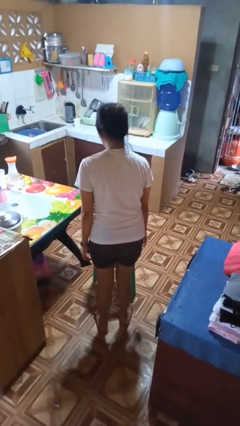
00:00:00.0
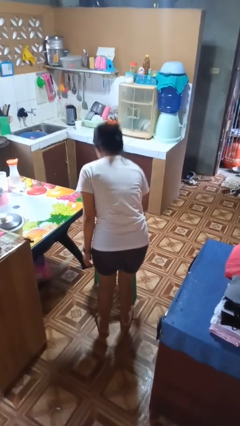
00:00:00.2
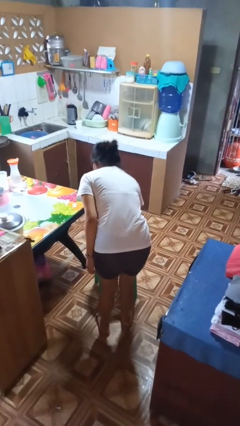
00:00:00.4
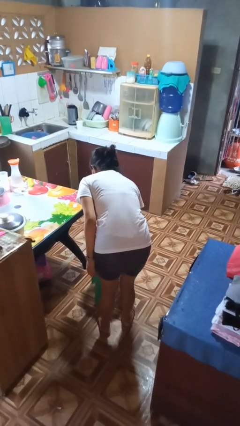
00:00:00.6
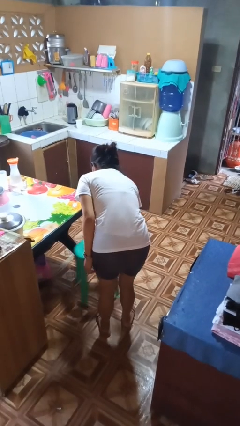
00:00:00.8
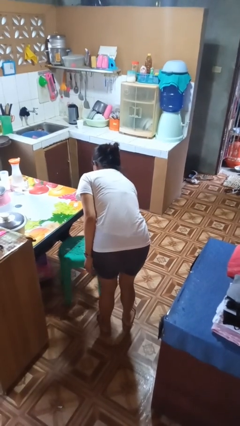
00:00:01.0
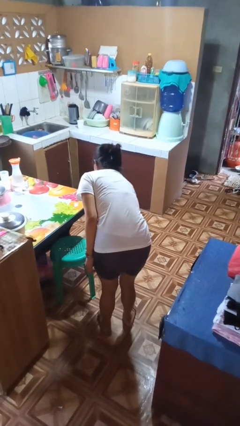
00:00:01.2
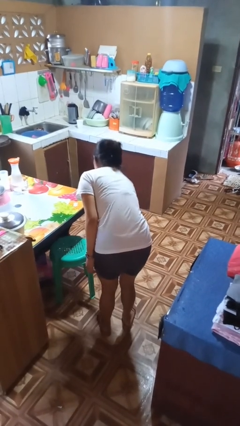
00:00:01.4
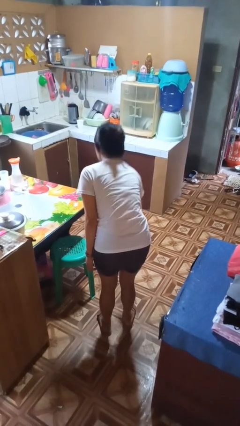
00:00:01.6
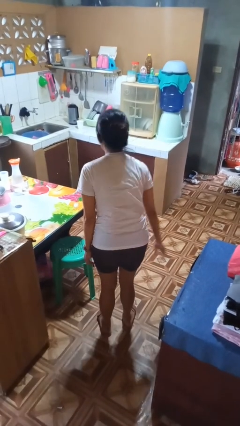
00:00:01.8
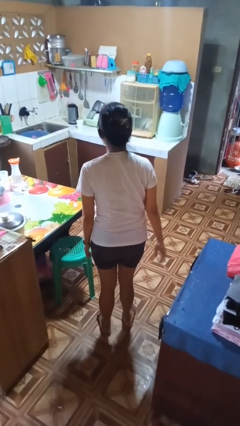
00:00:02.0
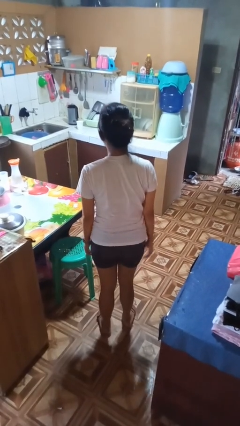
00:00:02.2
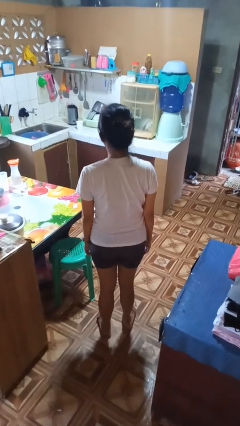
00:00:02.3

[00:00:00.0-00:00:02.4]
person pushes in chair

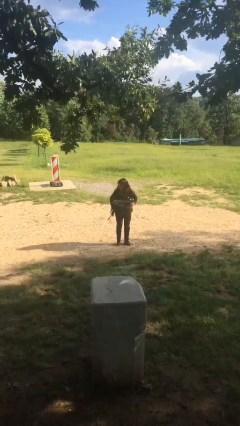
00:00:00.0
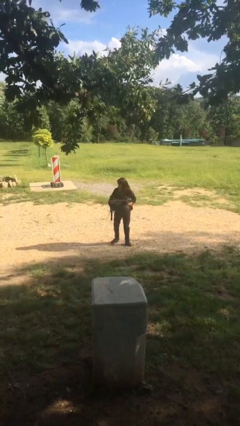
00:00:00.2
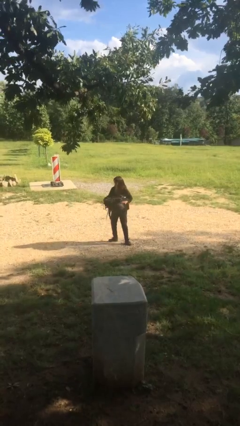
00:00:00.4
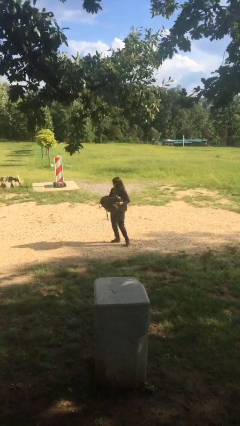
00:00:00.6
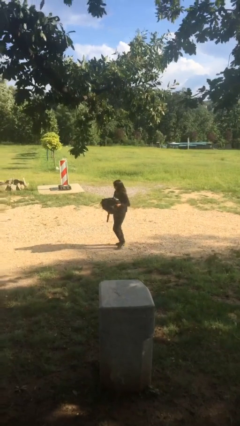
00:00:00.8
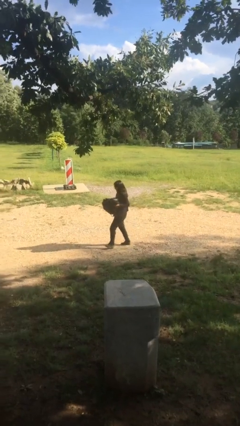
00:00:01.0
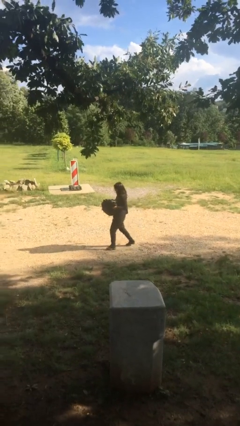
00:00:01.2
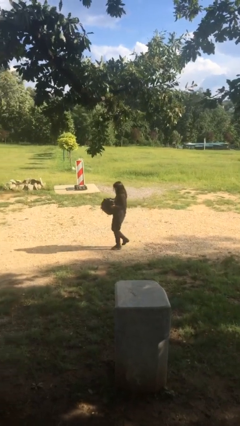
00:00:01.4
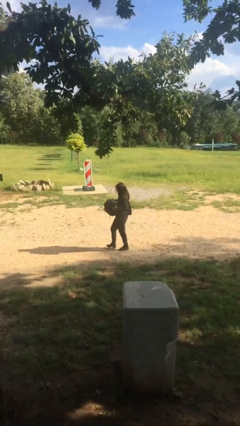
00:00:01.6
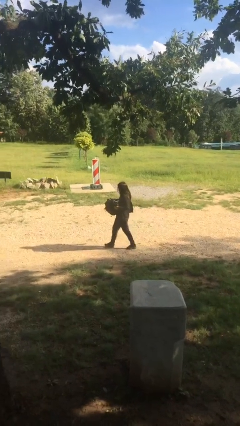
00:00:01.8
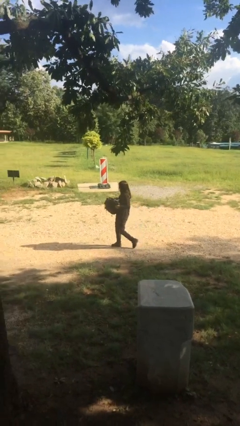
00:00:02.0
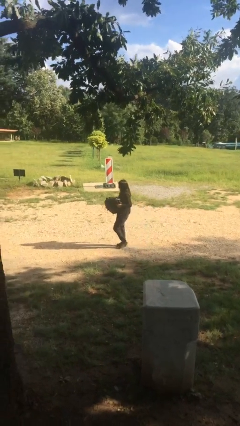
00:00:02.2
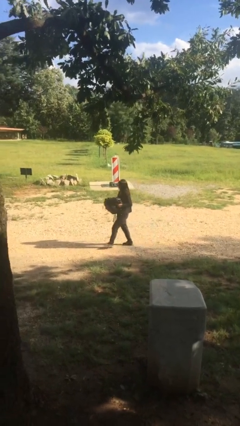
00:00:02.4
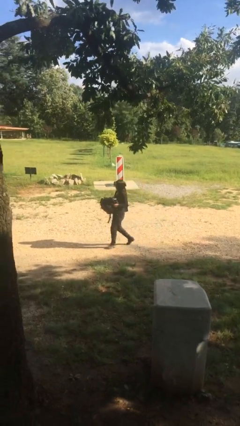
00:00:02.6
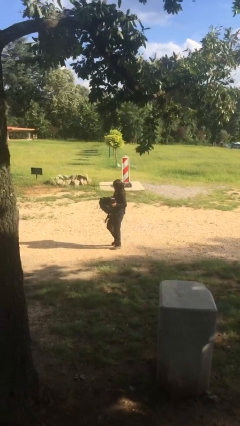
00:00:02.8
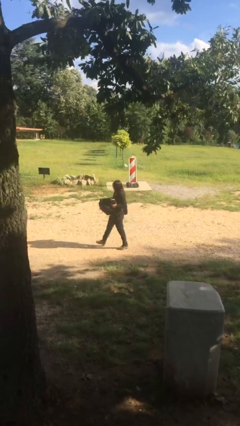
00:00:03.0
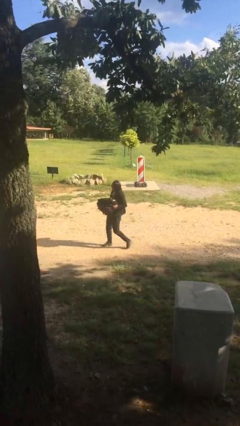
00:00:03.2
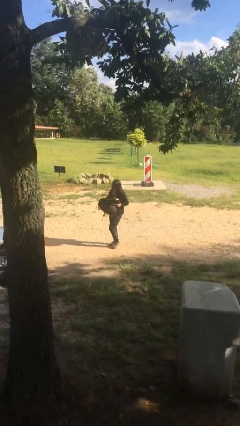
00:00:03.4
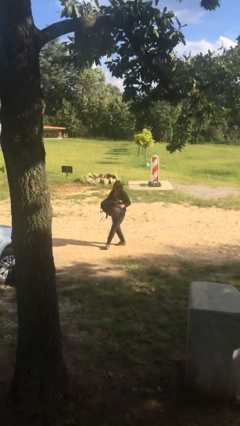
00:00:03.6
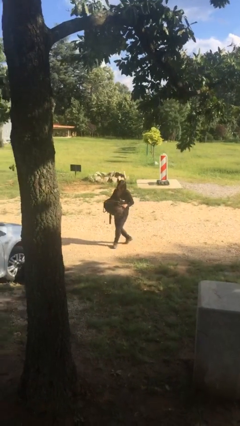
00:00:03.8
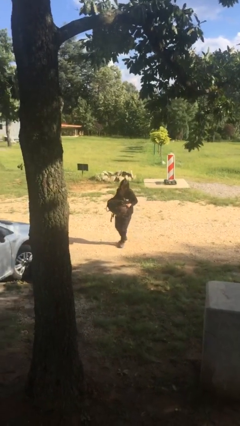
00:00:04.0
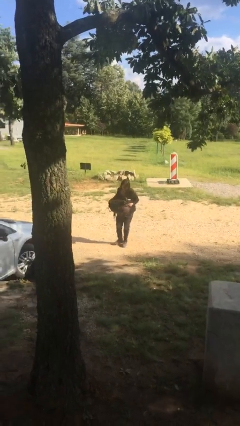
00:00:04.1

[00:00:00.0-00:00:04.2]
person carries heavy object

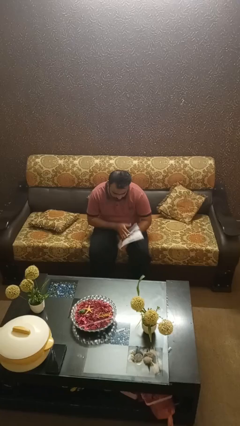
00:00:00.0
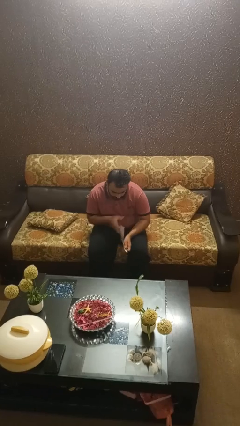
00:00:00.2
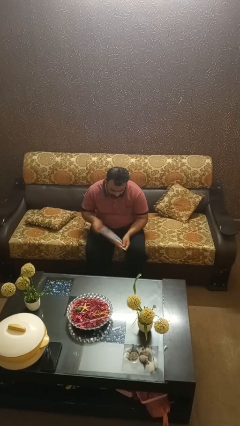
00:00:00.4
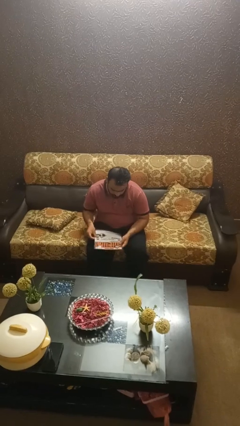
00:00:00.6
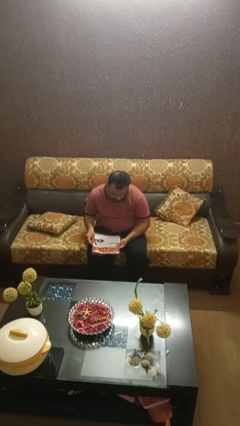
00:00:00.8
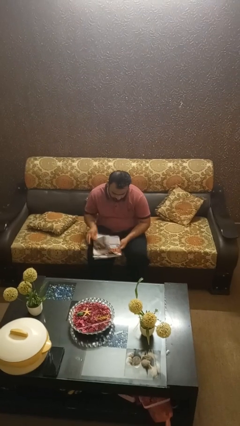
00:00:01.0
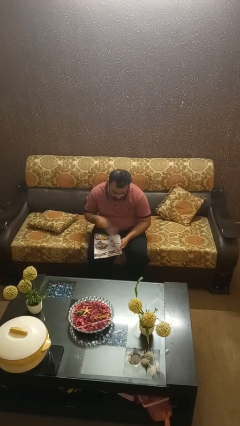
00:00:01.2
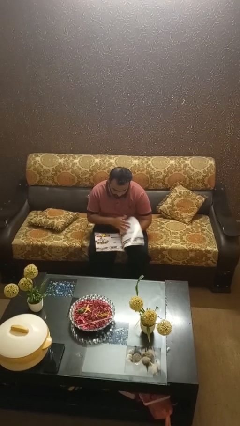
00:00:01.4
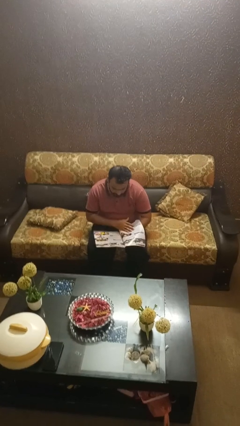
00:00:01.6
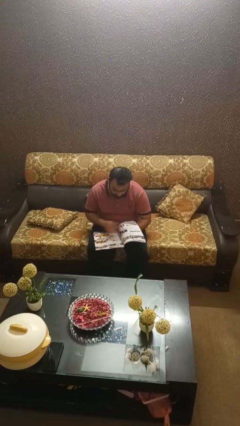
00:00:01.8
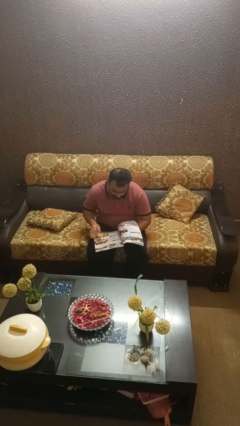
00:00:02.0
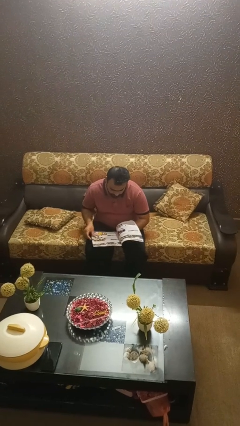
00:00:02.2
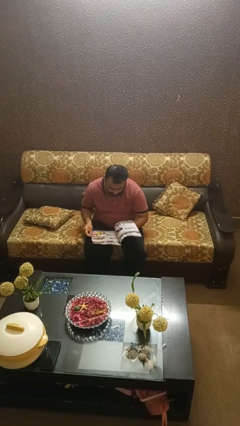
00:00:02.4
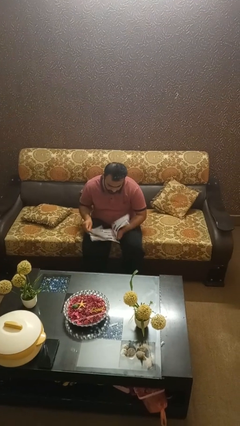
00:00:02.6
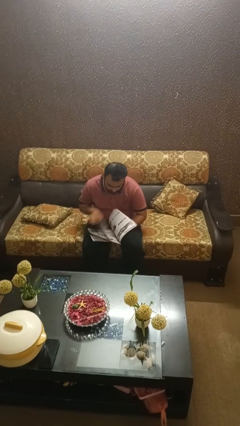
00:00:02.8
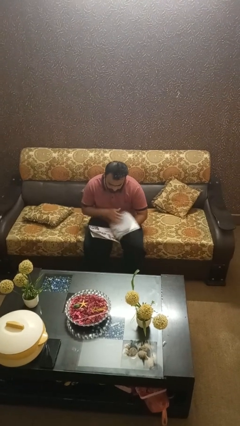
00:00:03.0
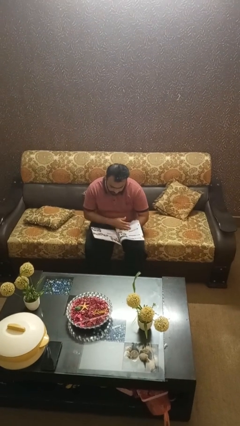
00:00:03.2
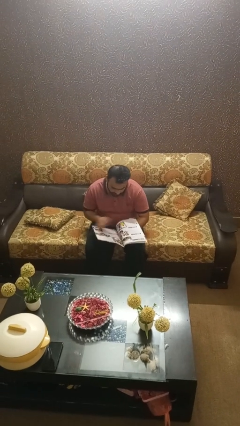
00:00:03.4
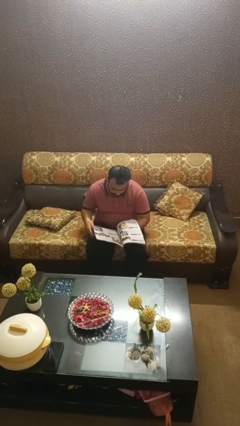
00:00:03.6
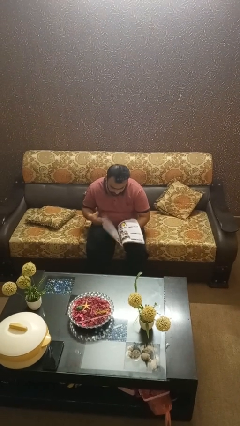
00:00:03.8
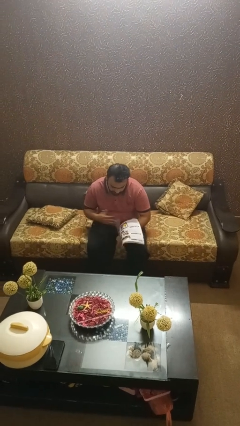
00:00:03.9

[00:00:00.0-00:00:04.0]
person reads magazine

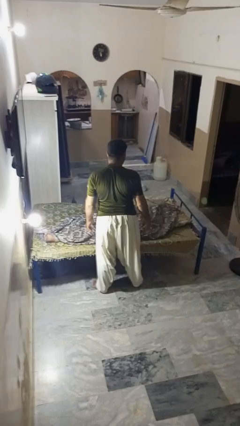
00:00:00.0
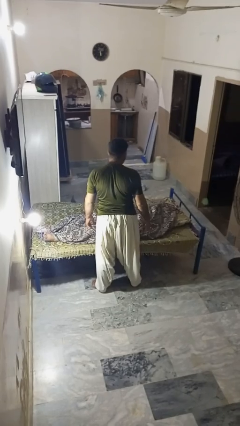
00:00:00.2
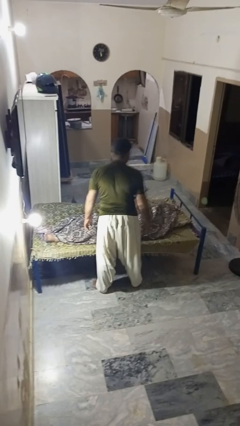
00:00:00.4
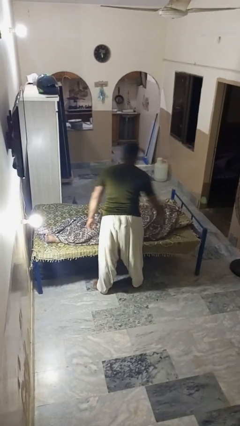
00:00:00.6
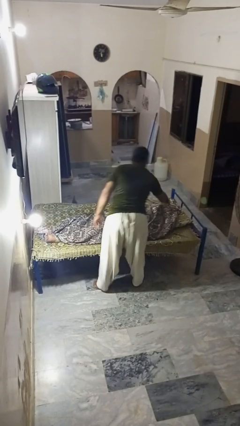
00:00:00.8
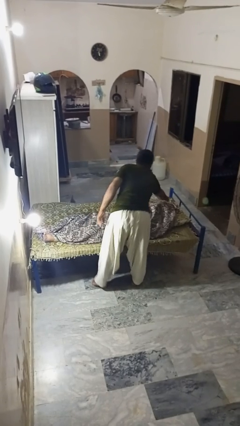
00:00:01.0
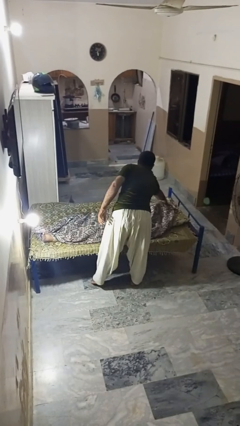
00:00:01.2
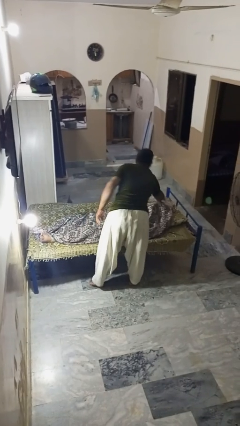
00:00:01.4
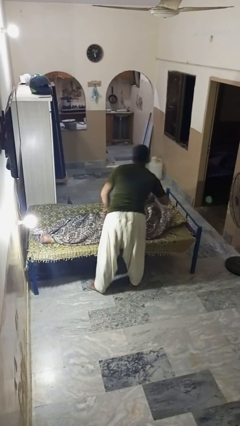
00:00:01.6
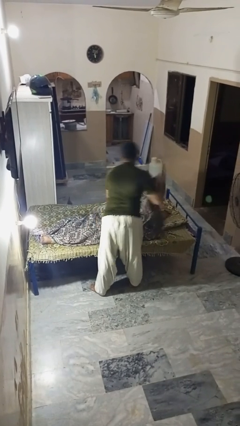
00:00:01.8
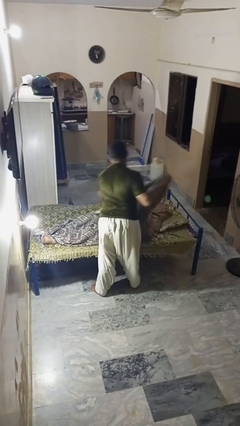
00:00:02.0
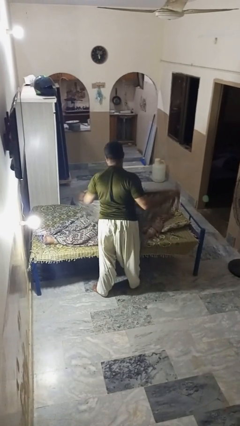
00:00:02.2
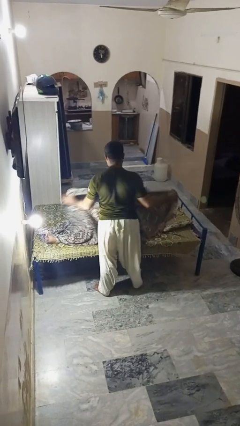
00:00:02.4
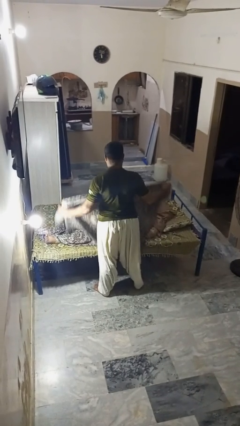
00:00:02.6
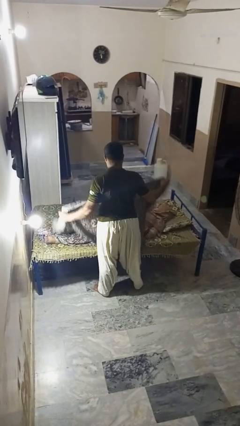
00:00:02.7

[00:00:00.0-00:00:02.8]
person uncovers friend with blanket

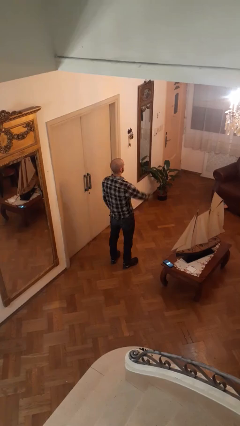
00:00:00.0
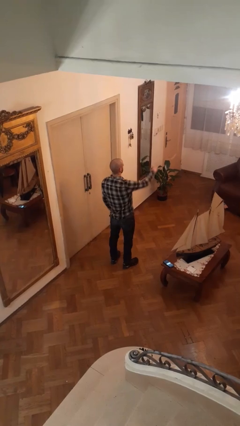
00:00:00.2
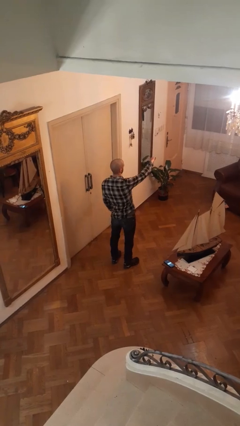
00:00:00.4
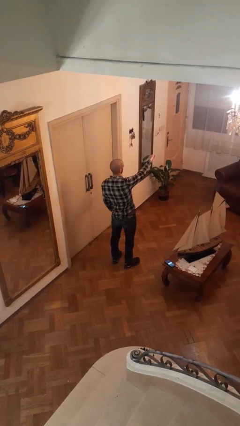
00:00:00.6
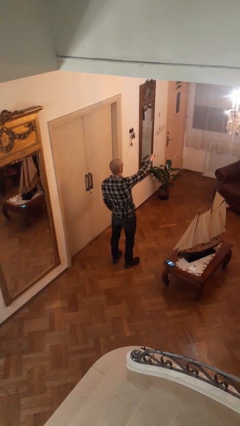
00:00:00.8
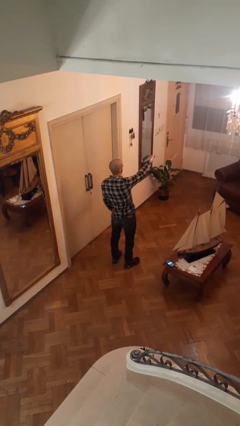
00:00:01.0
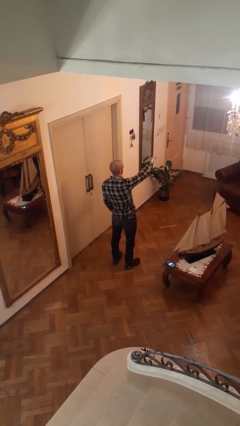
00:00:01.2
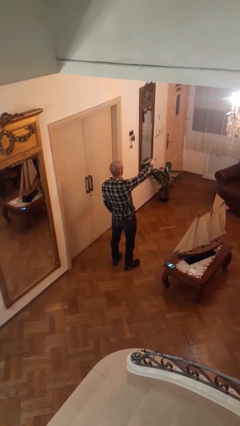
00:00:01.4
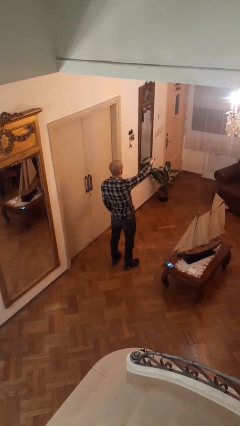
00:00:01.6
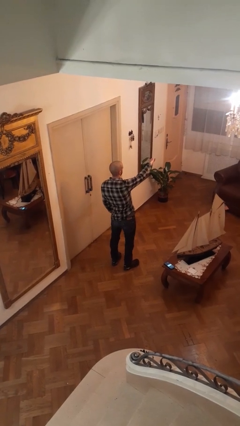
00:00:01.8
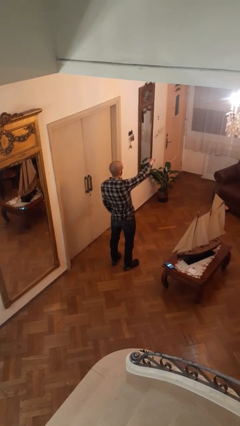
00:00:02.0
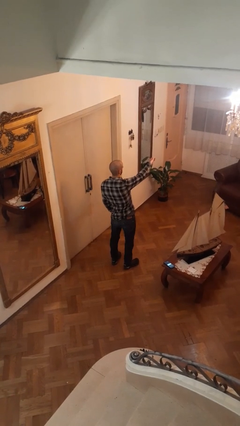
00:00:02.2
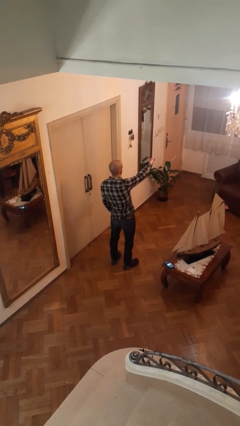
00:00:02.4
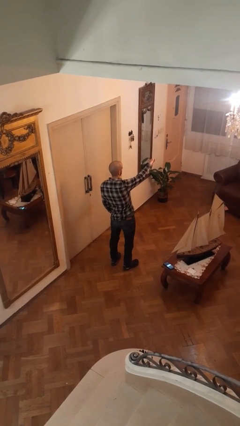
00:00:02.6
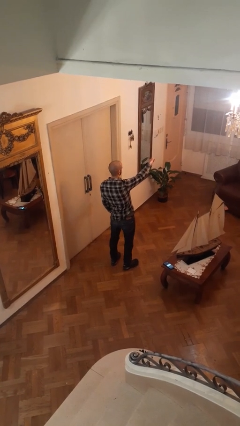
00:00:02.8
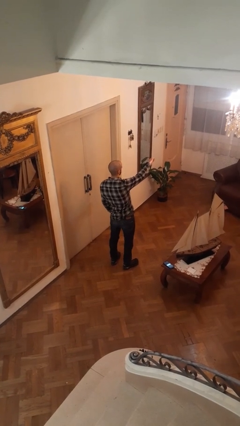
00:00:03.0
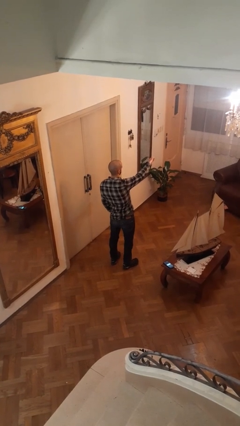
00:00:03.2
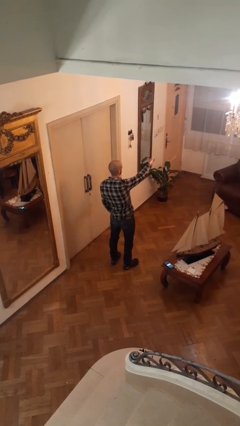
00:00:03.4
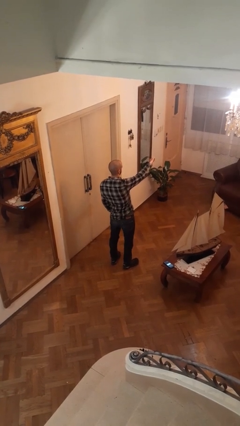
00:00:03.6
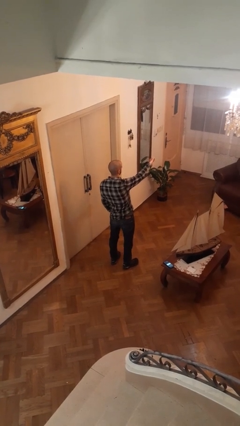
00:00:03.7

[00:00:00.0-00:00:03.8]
person gestures thumbs down

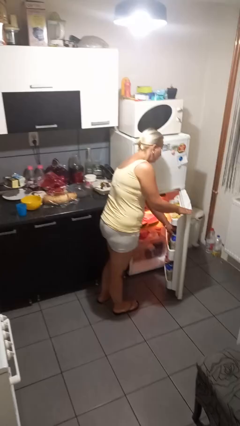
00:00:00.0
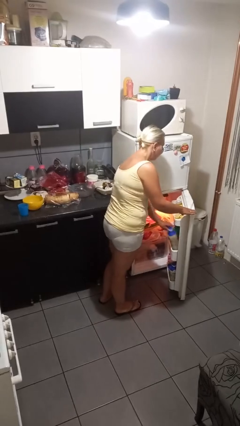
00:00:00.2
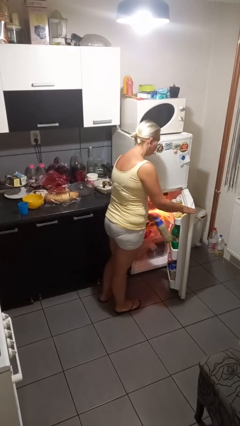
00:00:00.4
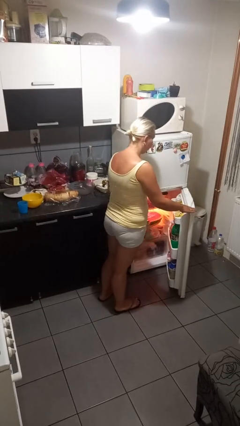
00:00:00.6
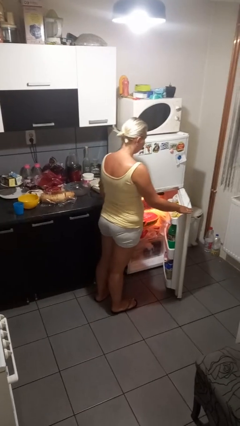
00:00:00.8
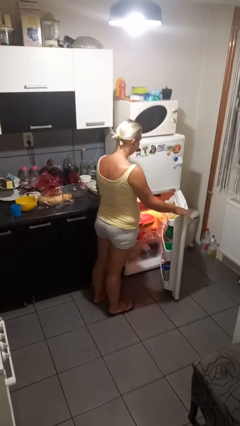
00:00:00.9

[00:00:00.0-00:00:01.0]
person takes object from refrigerator
